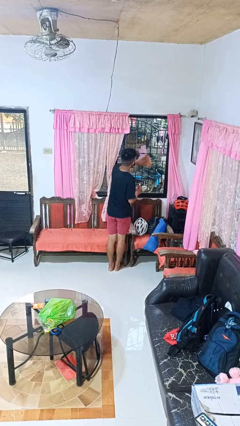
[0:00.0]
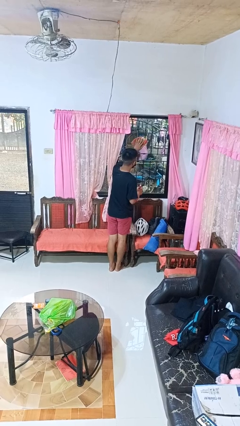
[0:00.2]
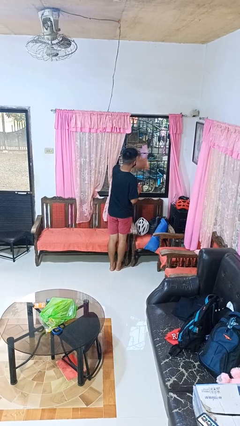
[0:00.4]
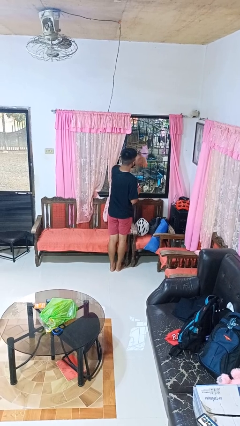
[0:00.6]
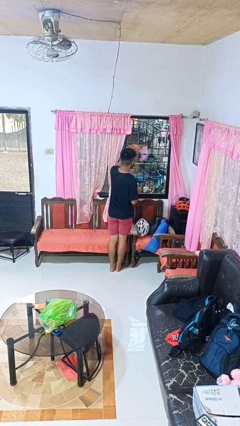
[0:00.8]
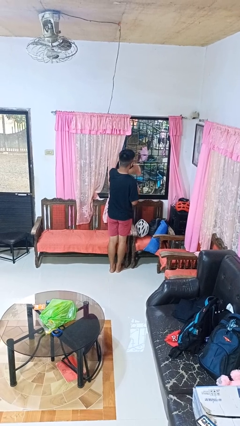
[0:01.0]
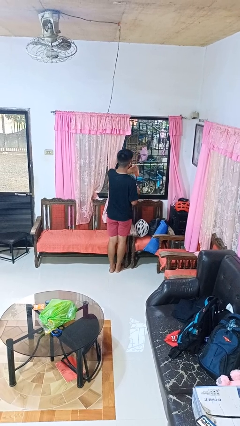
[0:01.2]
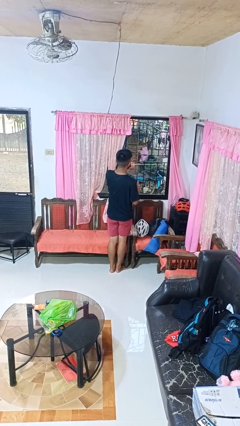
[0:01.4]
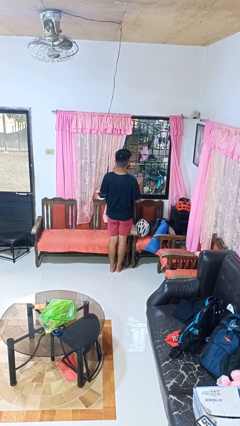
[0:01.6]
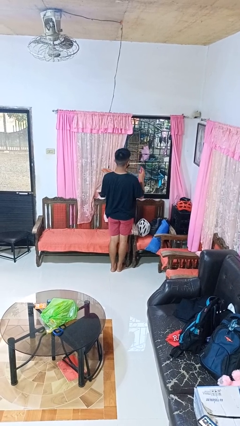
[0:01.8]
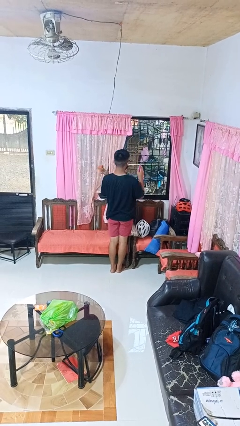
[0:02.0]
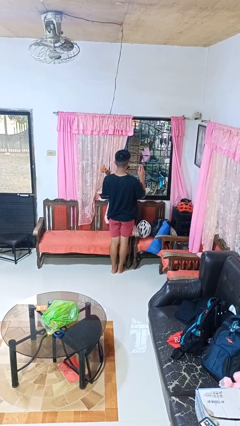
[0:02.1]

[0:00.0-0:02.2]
person washes window

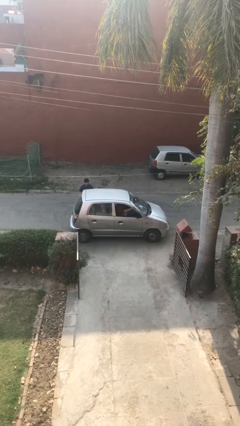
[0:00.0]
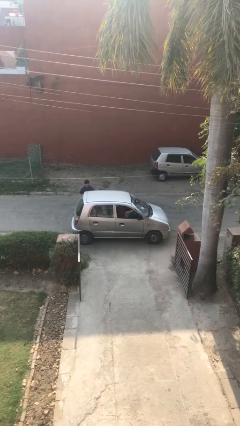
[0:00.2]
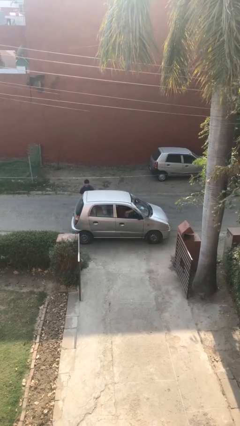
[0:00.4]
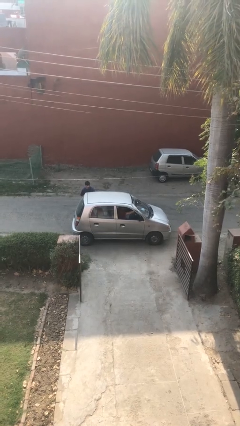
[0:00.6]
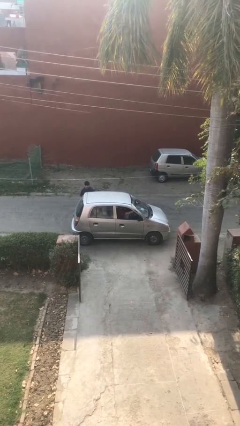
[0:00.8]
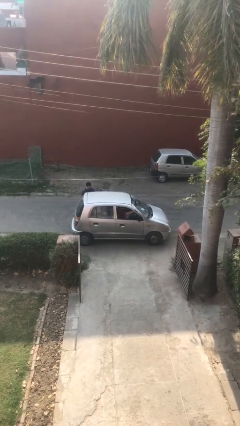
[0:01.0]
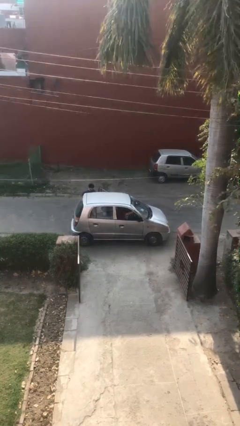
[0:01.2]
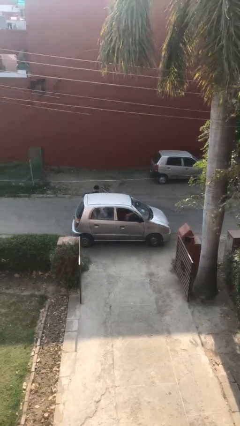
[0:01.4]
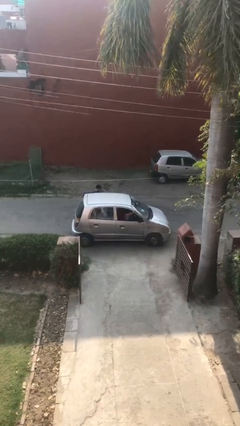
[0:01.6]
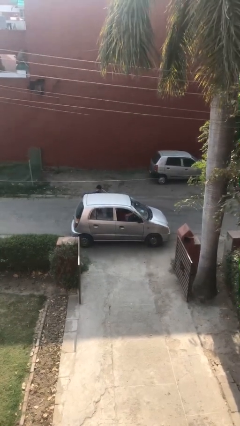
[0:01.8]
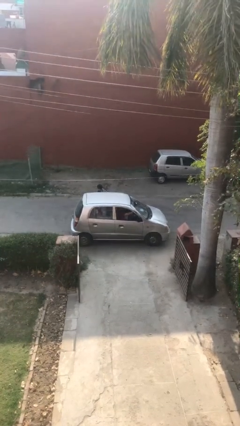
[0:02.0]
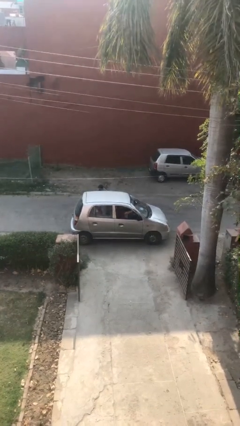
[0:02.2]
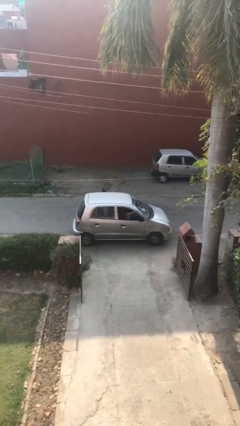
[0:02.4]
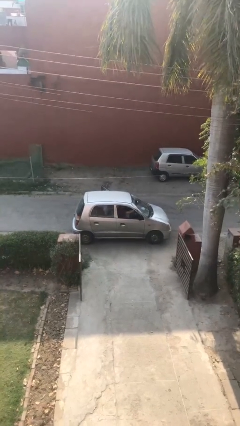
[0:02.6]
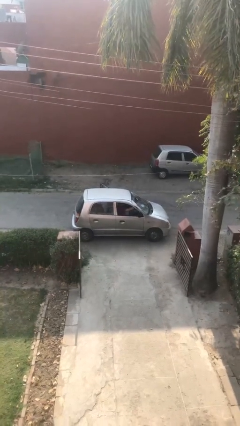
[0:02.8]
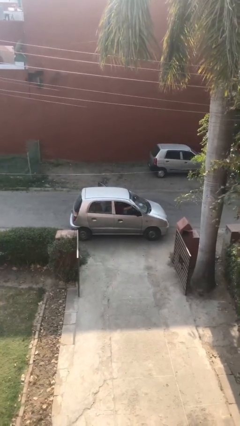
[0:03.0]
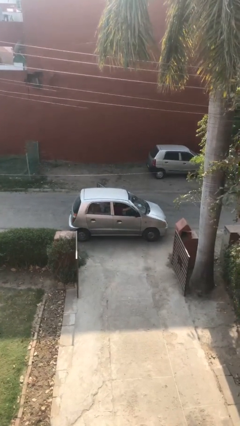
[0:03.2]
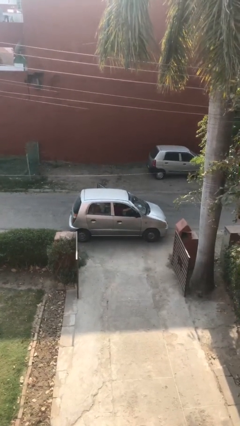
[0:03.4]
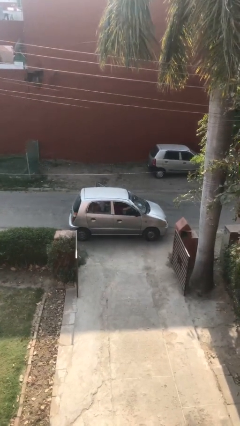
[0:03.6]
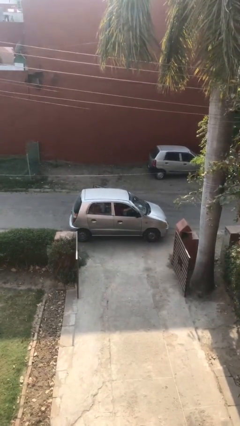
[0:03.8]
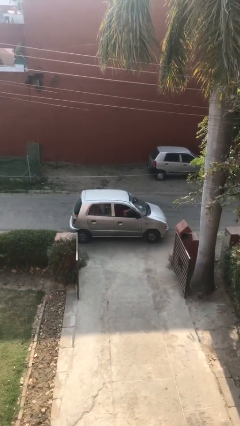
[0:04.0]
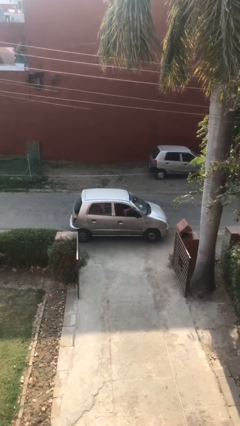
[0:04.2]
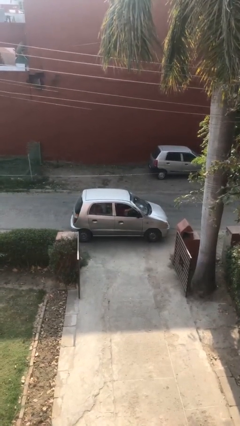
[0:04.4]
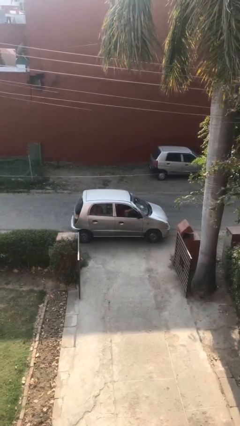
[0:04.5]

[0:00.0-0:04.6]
car picks up person

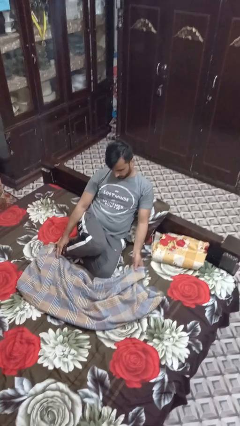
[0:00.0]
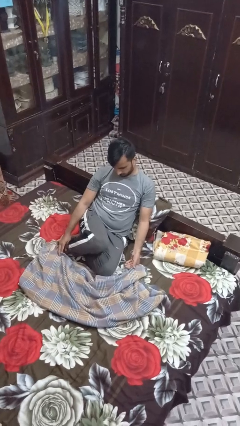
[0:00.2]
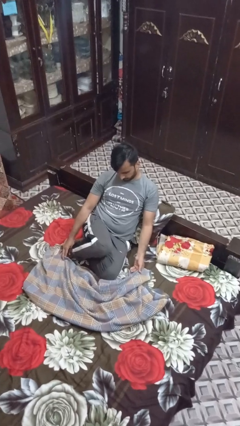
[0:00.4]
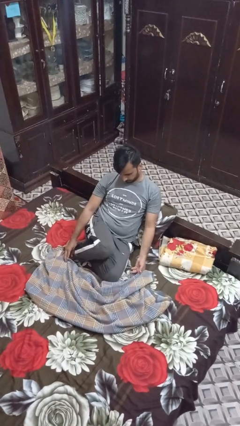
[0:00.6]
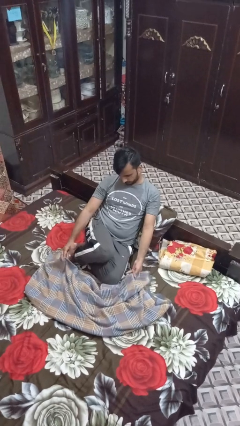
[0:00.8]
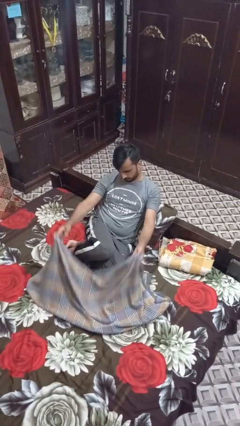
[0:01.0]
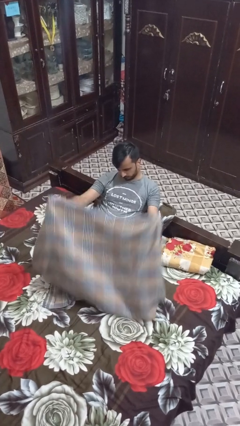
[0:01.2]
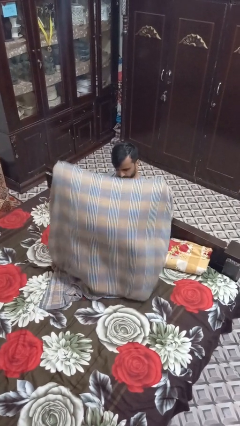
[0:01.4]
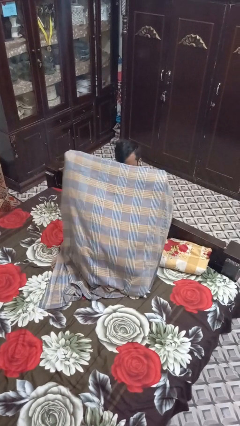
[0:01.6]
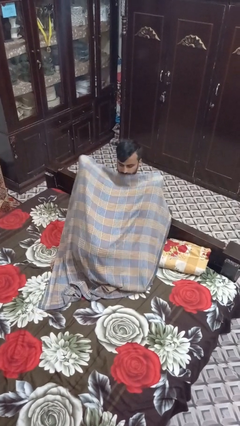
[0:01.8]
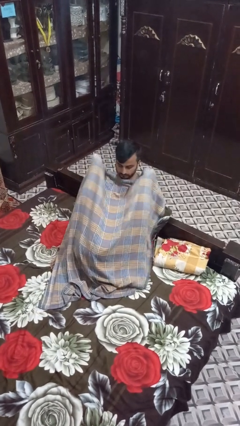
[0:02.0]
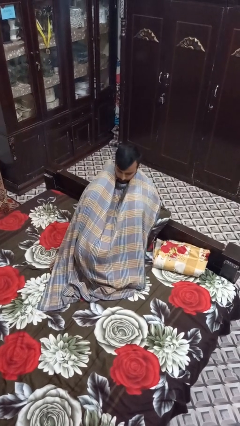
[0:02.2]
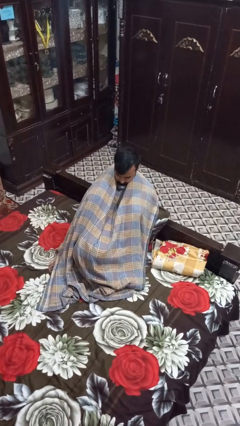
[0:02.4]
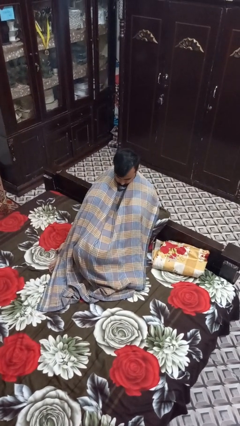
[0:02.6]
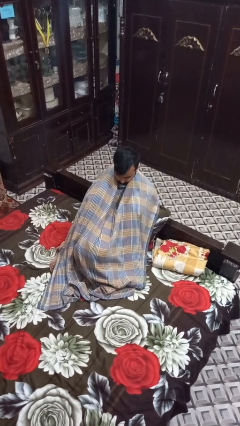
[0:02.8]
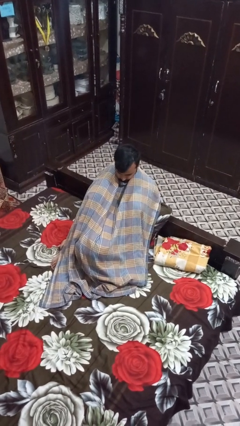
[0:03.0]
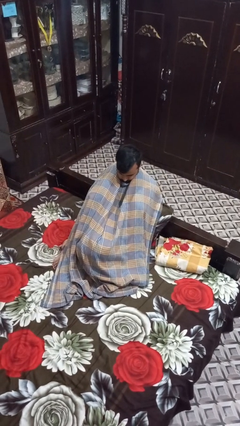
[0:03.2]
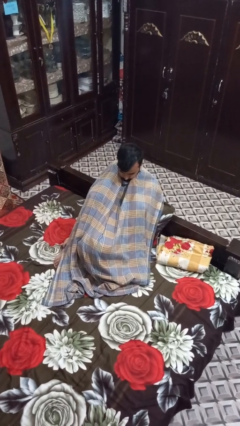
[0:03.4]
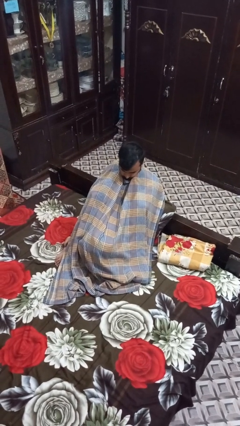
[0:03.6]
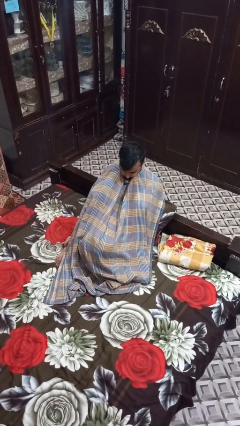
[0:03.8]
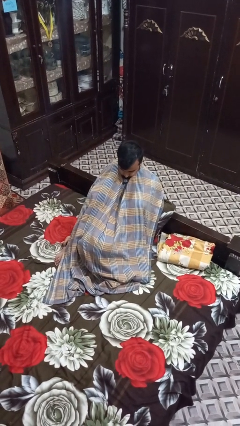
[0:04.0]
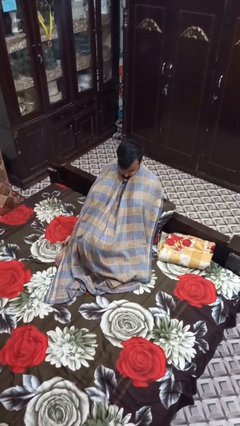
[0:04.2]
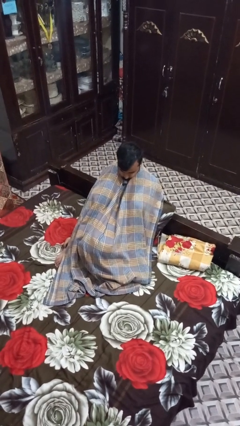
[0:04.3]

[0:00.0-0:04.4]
person covers with blanket

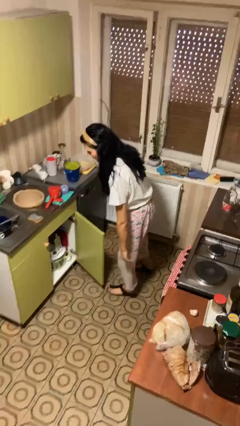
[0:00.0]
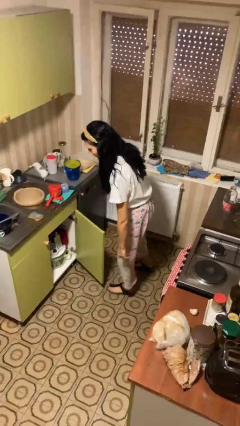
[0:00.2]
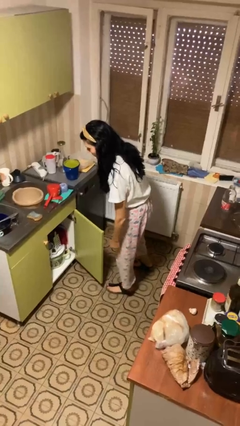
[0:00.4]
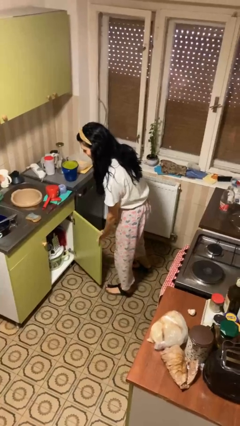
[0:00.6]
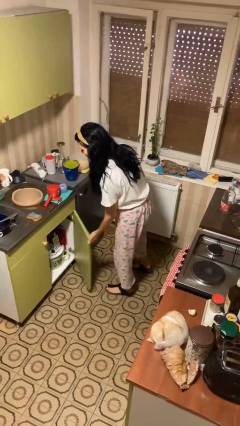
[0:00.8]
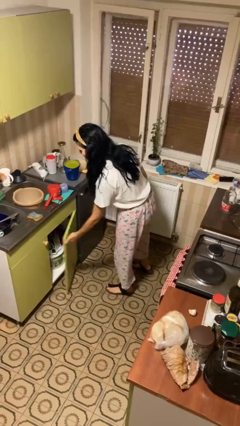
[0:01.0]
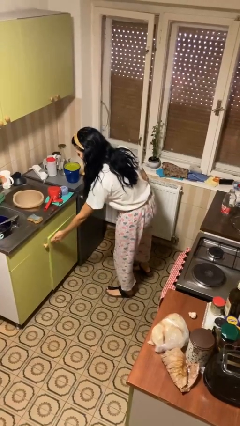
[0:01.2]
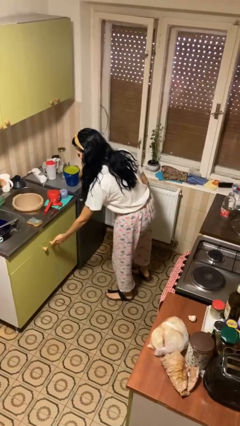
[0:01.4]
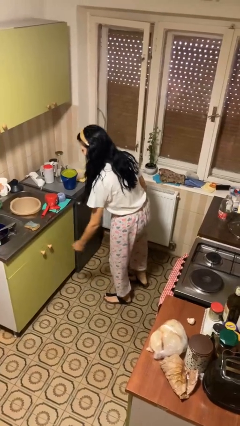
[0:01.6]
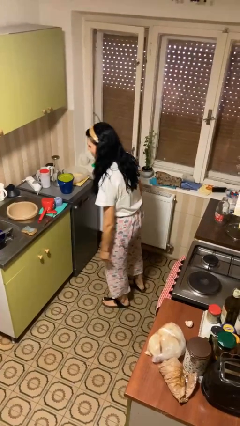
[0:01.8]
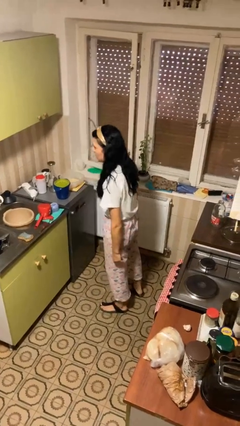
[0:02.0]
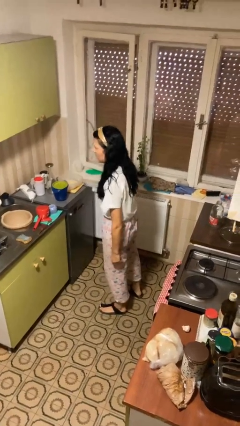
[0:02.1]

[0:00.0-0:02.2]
person closes cabinet

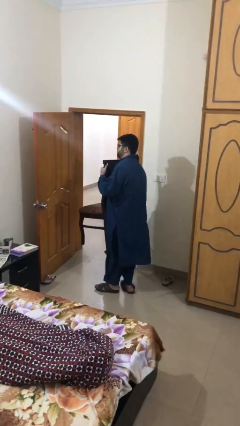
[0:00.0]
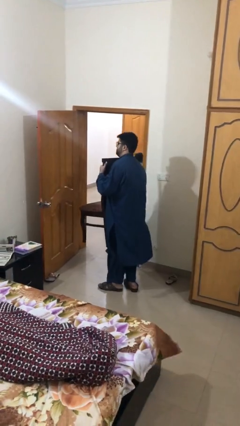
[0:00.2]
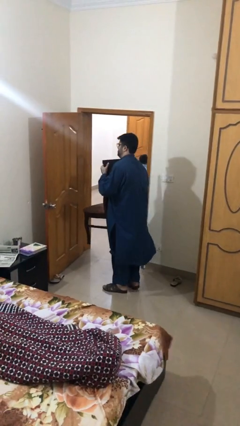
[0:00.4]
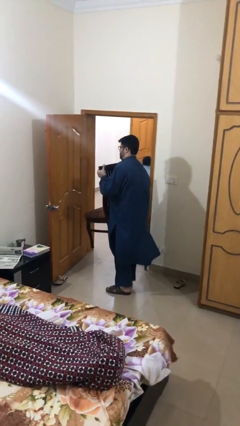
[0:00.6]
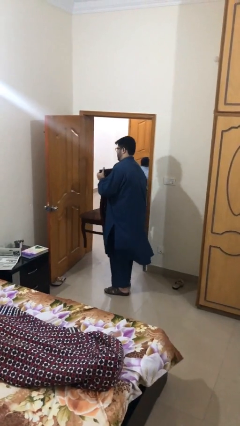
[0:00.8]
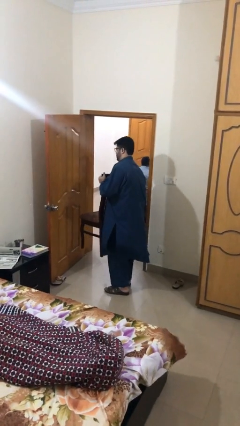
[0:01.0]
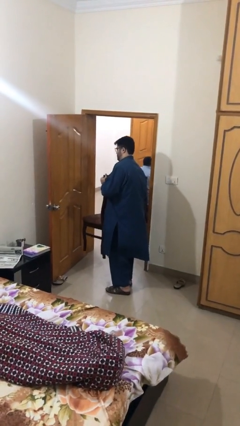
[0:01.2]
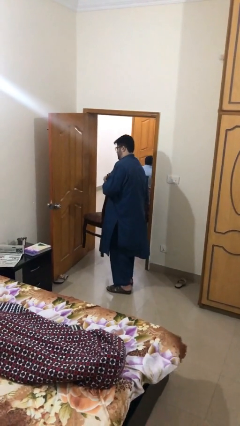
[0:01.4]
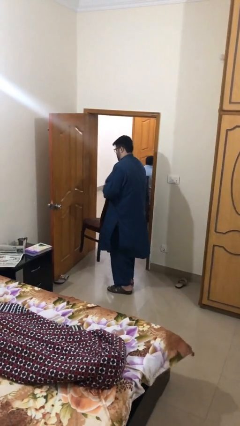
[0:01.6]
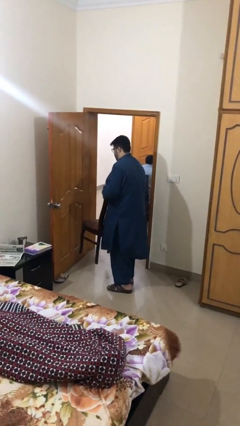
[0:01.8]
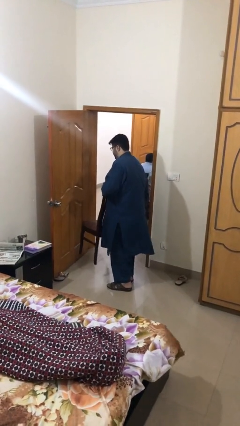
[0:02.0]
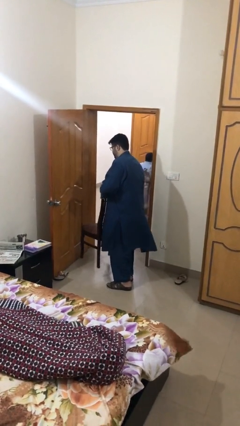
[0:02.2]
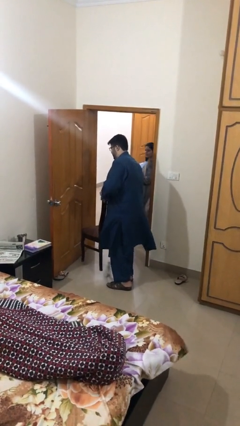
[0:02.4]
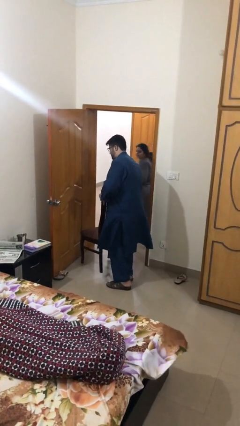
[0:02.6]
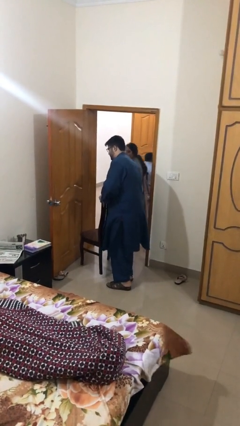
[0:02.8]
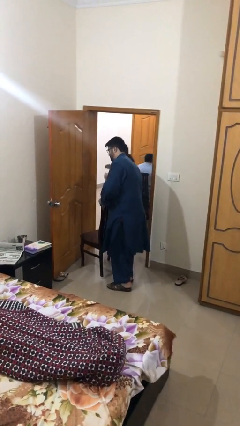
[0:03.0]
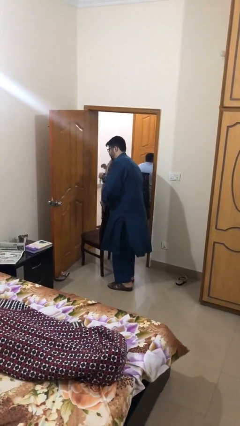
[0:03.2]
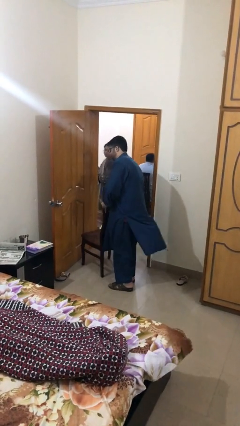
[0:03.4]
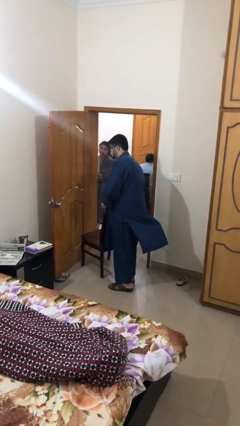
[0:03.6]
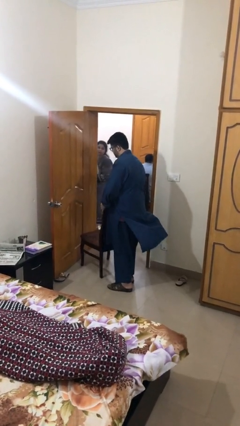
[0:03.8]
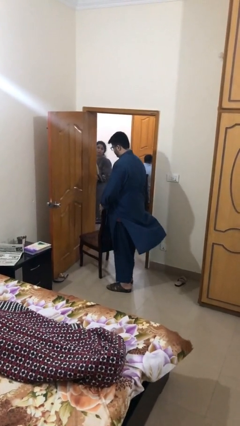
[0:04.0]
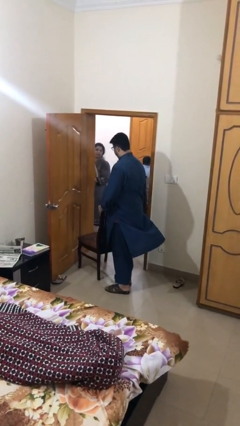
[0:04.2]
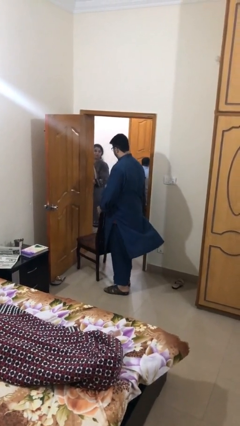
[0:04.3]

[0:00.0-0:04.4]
person puts down object on floor
